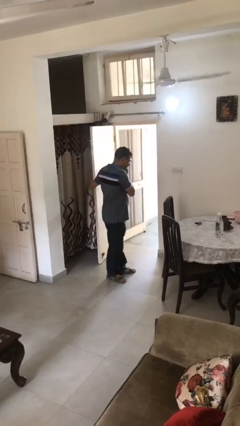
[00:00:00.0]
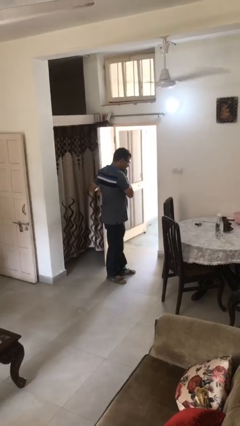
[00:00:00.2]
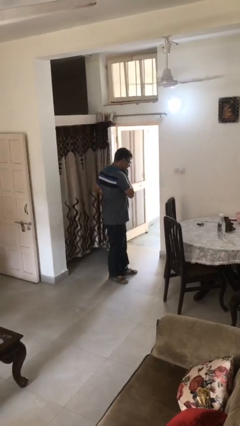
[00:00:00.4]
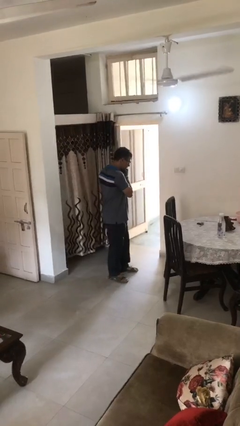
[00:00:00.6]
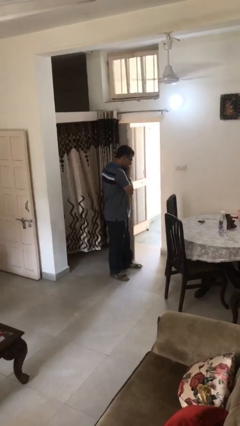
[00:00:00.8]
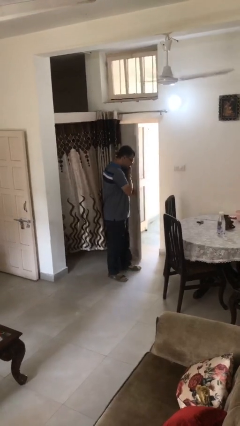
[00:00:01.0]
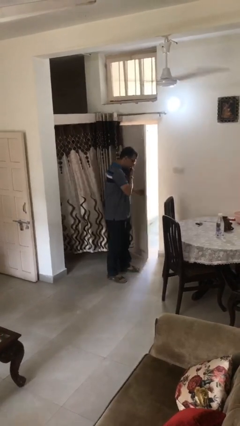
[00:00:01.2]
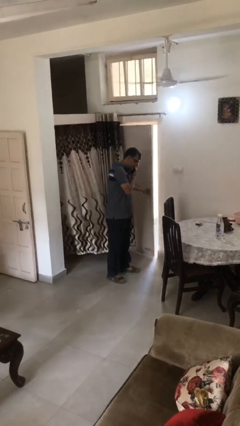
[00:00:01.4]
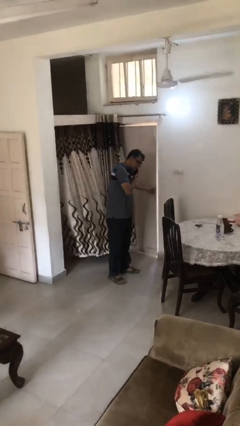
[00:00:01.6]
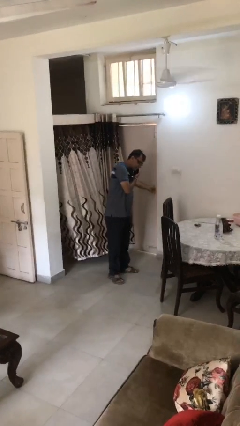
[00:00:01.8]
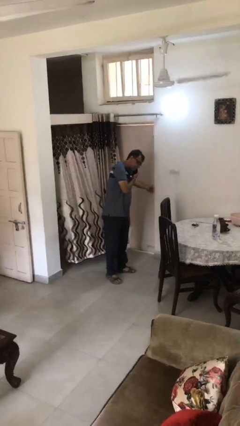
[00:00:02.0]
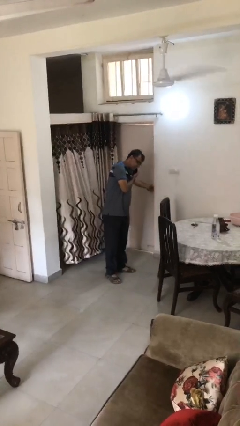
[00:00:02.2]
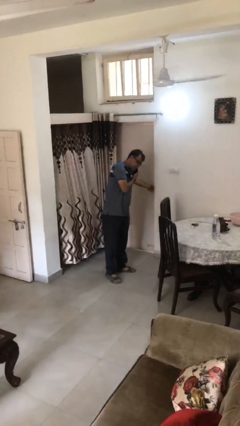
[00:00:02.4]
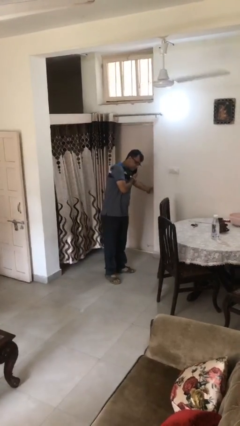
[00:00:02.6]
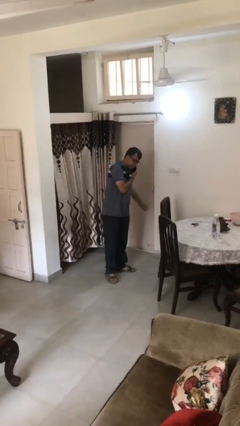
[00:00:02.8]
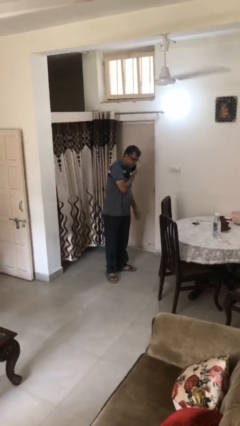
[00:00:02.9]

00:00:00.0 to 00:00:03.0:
person closes facility door

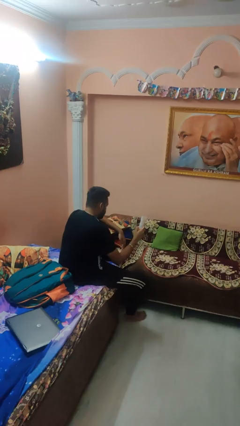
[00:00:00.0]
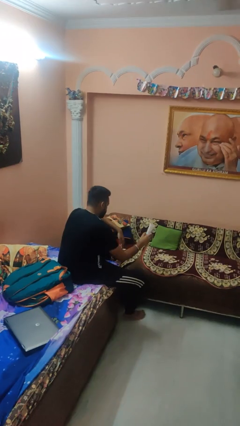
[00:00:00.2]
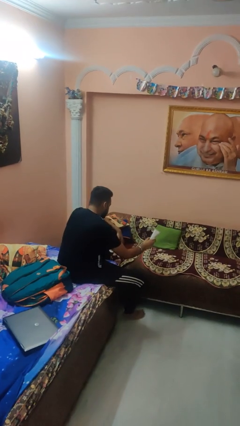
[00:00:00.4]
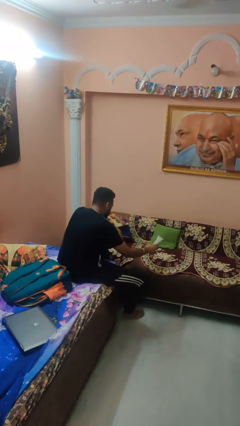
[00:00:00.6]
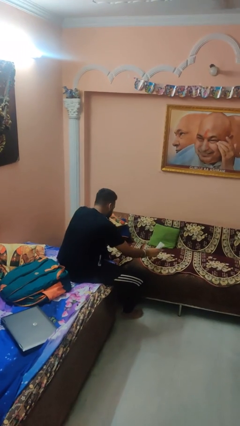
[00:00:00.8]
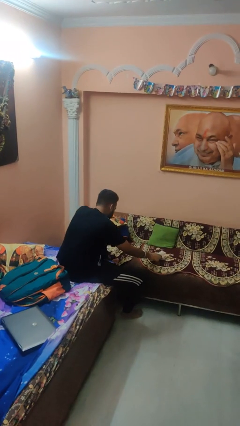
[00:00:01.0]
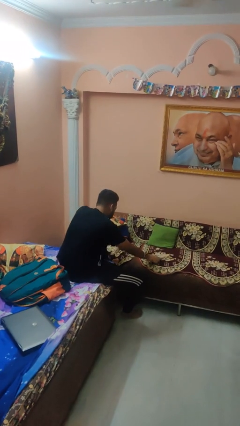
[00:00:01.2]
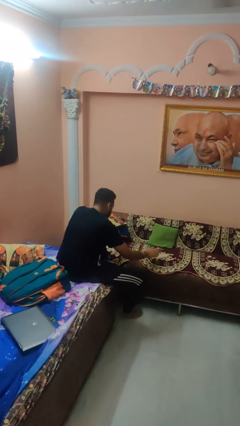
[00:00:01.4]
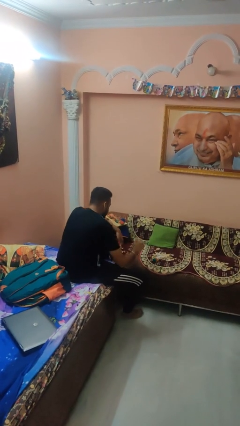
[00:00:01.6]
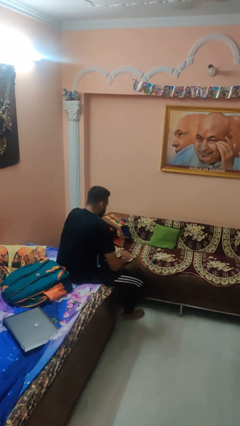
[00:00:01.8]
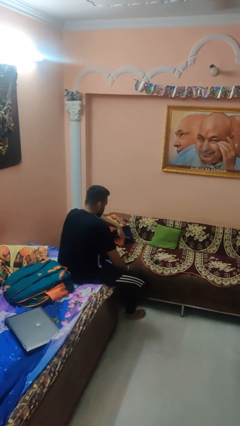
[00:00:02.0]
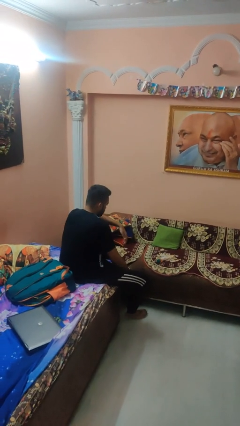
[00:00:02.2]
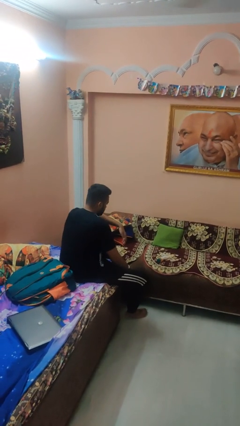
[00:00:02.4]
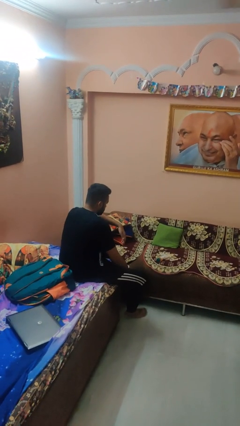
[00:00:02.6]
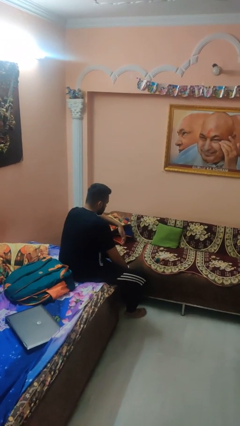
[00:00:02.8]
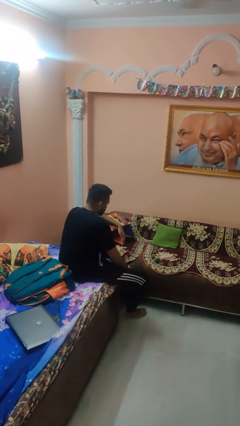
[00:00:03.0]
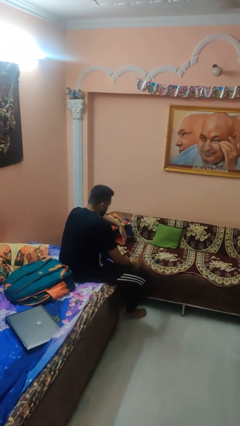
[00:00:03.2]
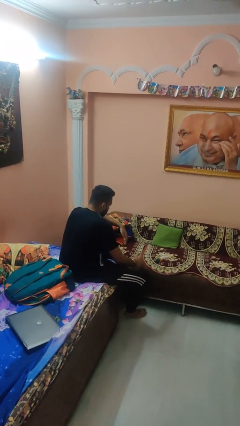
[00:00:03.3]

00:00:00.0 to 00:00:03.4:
person puts down object on couch

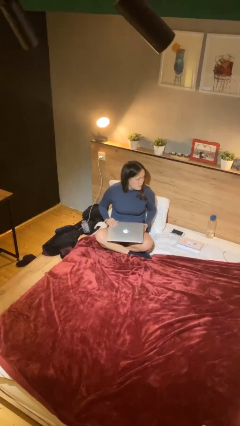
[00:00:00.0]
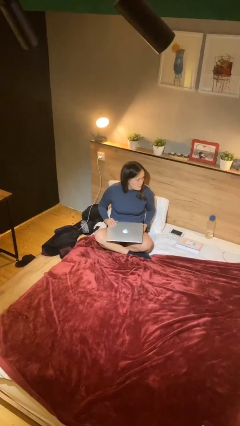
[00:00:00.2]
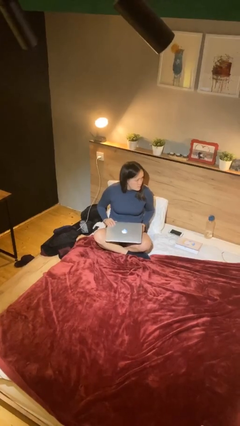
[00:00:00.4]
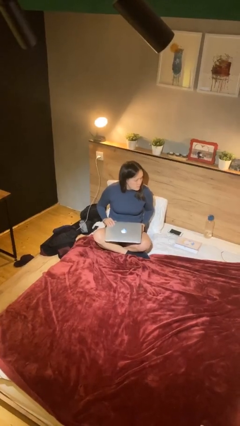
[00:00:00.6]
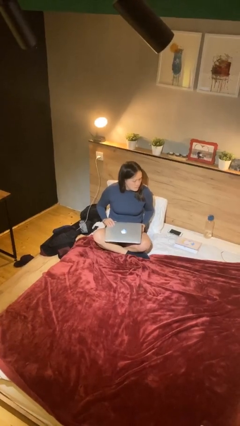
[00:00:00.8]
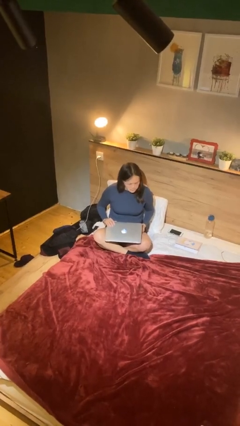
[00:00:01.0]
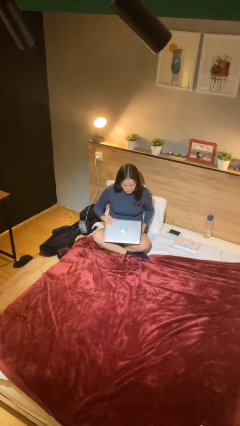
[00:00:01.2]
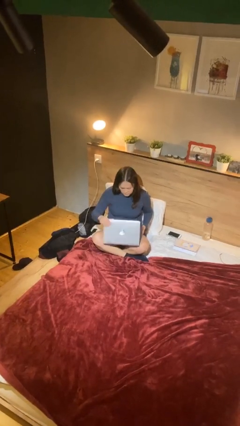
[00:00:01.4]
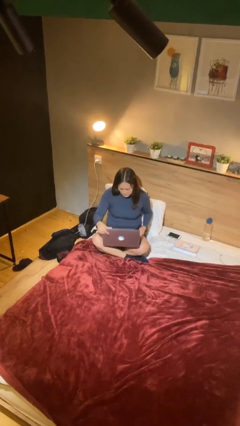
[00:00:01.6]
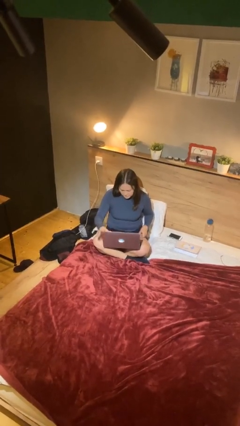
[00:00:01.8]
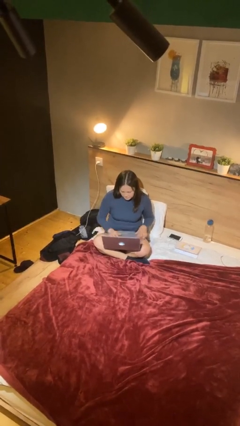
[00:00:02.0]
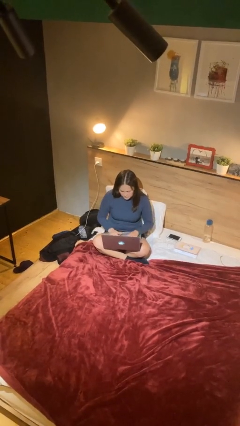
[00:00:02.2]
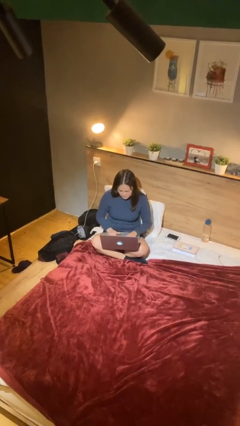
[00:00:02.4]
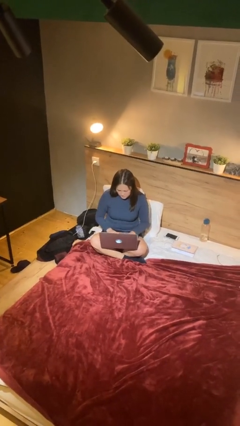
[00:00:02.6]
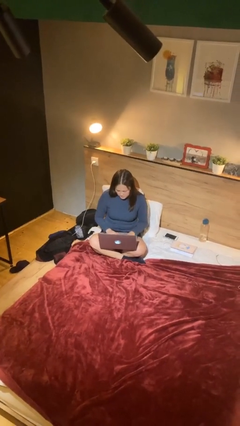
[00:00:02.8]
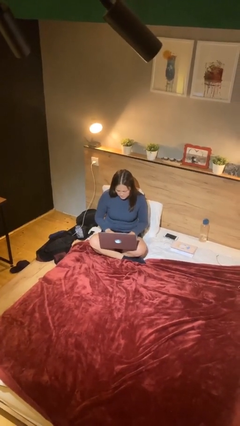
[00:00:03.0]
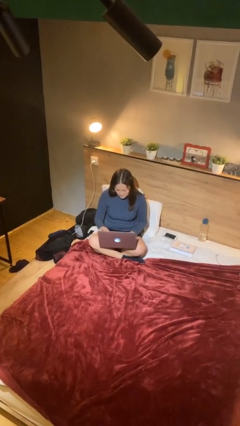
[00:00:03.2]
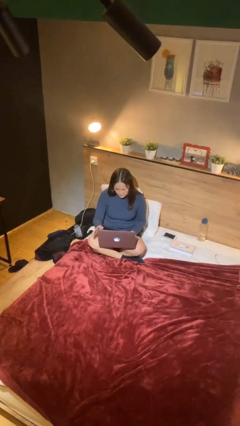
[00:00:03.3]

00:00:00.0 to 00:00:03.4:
person interacts with laptop

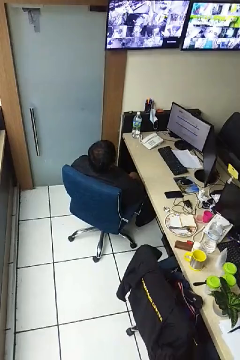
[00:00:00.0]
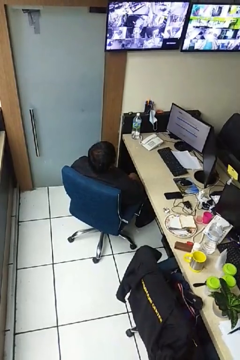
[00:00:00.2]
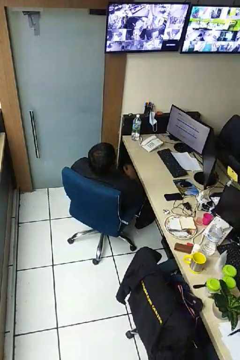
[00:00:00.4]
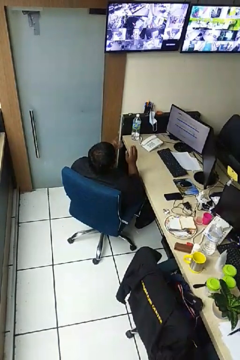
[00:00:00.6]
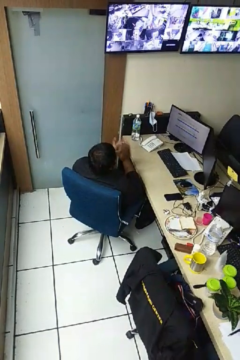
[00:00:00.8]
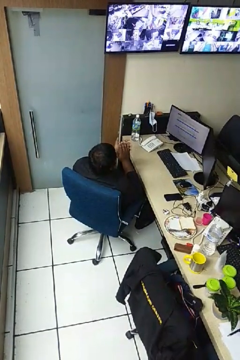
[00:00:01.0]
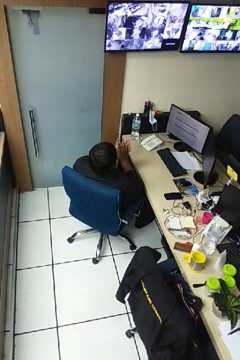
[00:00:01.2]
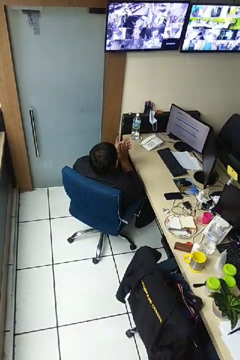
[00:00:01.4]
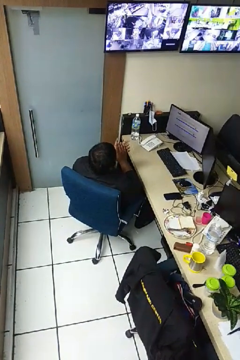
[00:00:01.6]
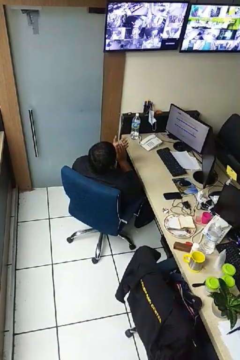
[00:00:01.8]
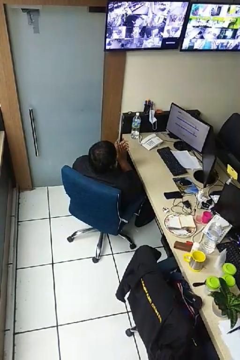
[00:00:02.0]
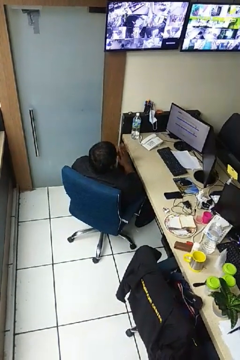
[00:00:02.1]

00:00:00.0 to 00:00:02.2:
person claps hands

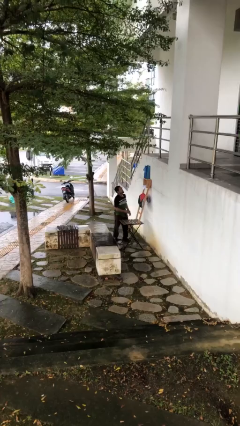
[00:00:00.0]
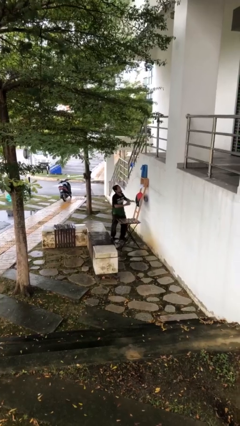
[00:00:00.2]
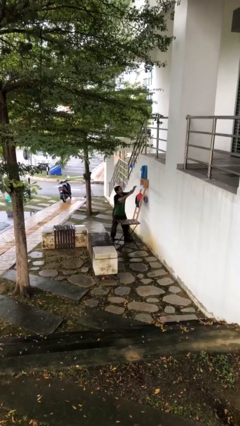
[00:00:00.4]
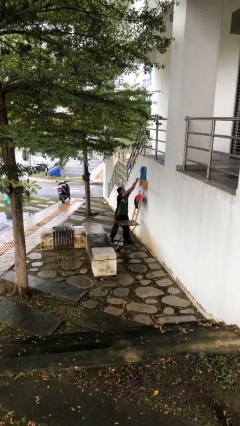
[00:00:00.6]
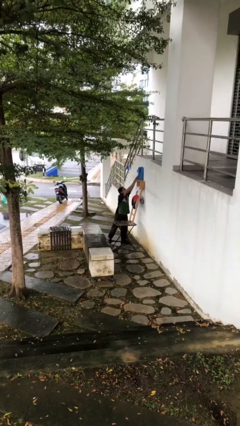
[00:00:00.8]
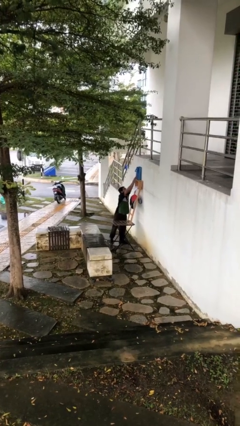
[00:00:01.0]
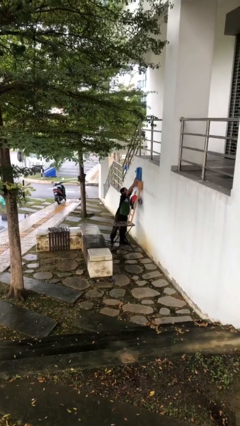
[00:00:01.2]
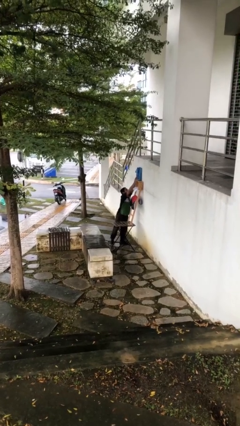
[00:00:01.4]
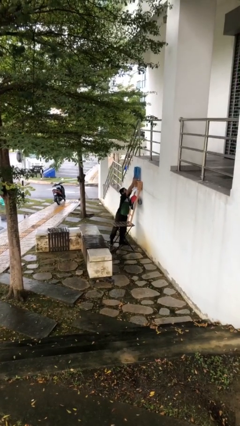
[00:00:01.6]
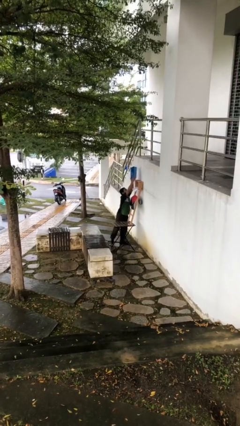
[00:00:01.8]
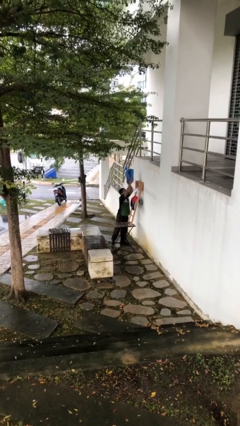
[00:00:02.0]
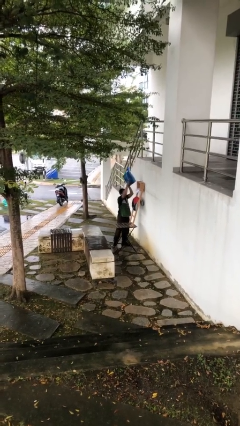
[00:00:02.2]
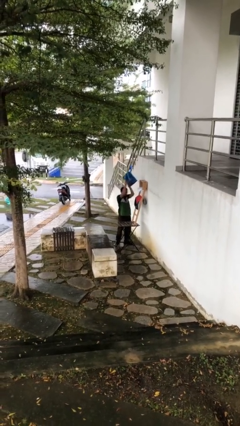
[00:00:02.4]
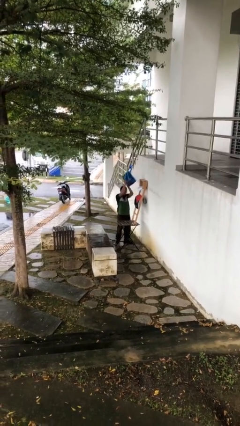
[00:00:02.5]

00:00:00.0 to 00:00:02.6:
person picks up object from shelf

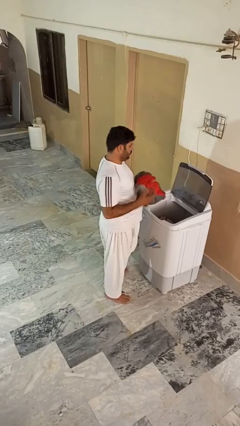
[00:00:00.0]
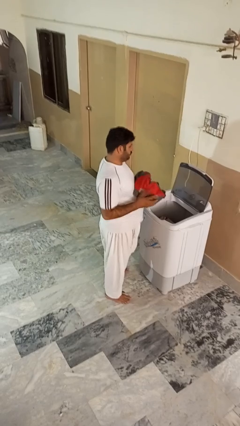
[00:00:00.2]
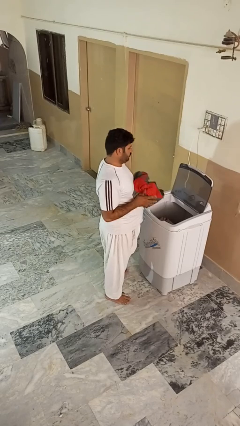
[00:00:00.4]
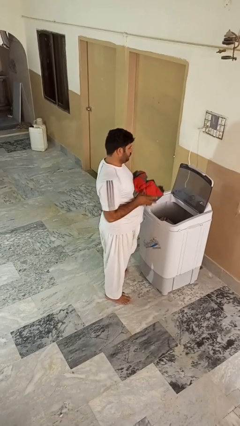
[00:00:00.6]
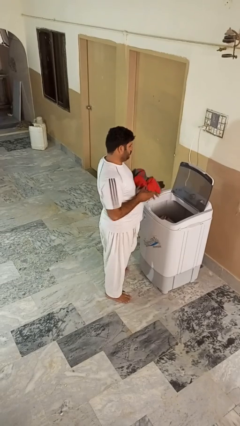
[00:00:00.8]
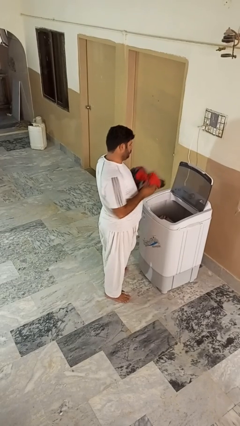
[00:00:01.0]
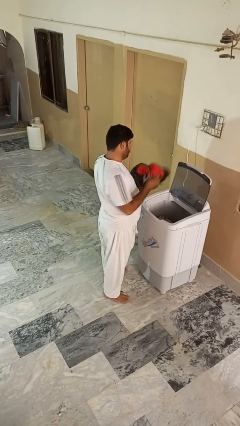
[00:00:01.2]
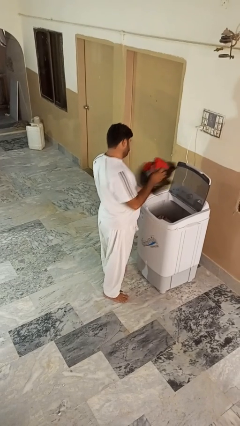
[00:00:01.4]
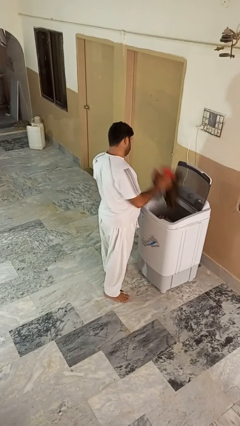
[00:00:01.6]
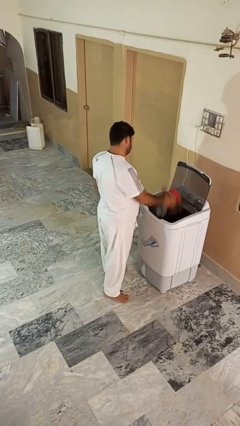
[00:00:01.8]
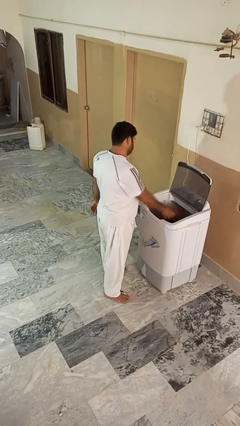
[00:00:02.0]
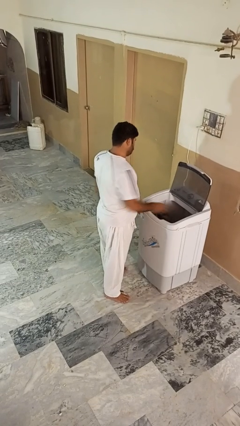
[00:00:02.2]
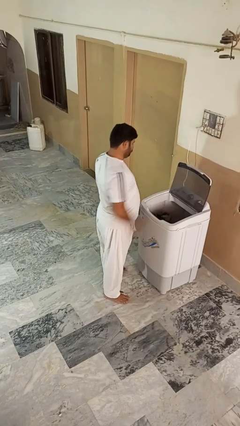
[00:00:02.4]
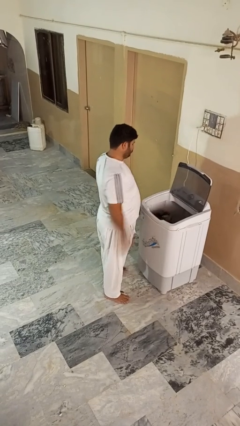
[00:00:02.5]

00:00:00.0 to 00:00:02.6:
person loads clotheswasher
